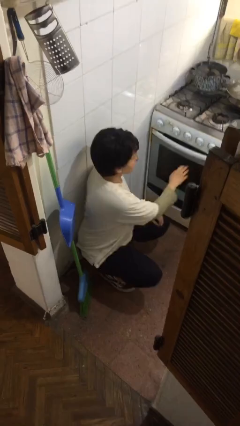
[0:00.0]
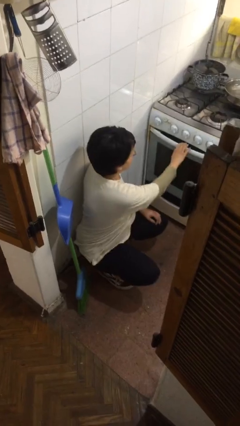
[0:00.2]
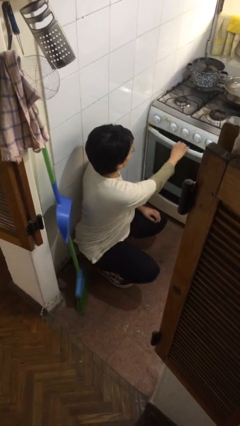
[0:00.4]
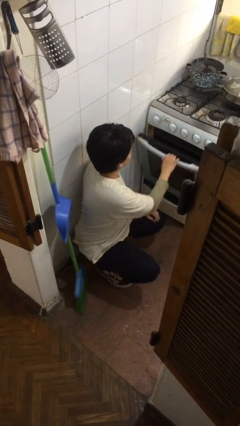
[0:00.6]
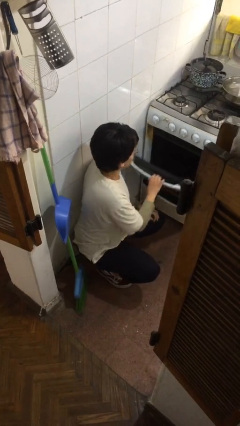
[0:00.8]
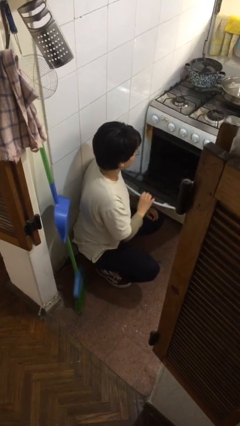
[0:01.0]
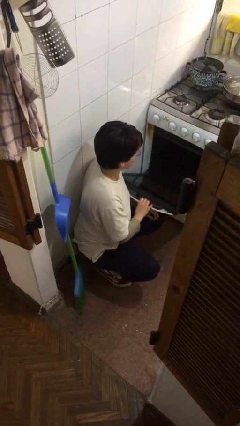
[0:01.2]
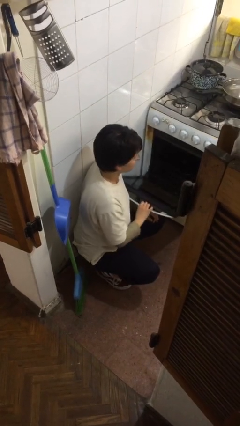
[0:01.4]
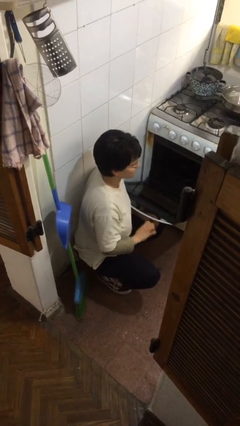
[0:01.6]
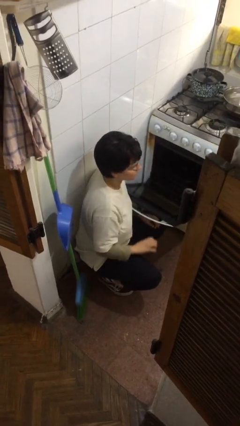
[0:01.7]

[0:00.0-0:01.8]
person opens oven door

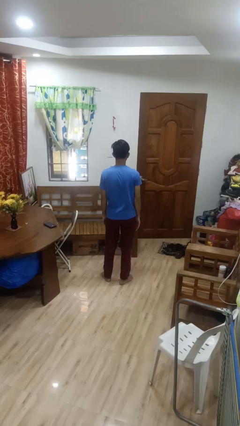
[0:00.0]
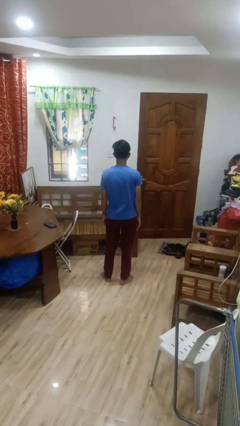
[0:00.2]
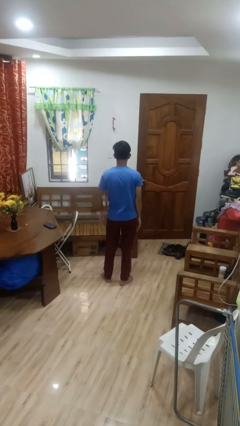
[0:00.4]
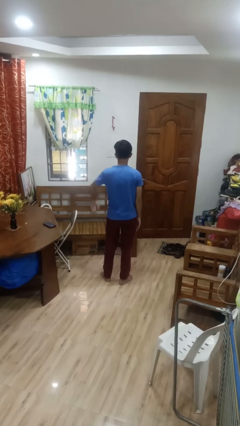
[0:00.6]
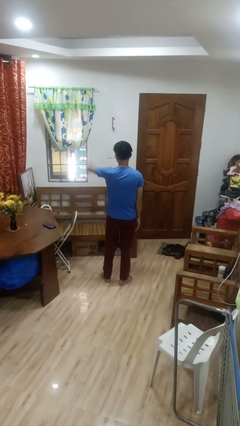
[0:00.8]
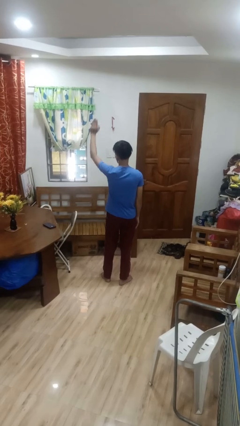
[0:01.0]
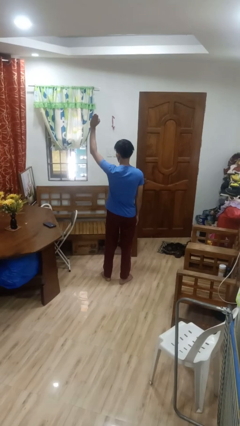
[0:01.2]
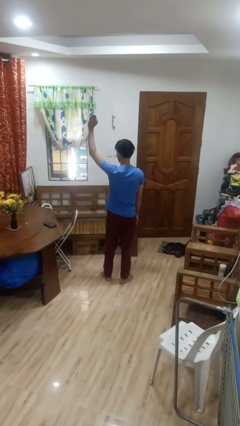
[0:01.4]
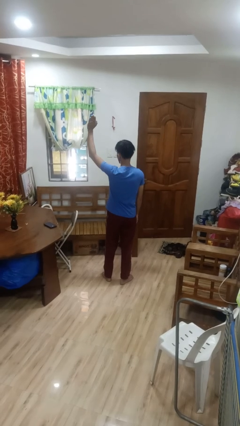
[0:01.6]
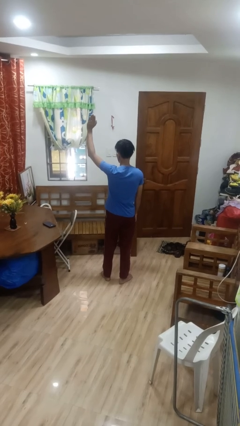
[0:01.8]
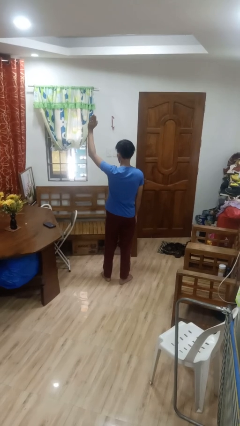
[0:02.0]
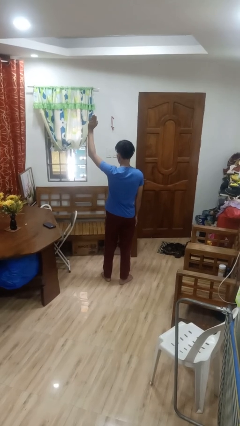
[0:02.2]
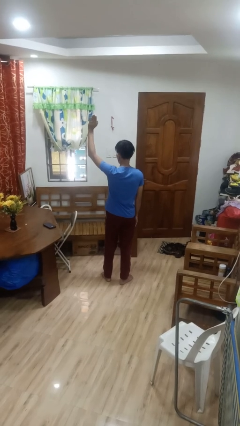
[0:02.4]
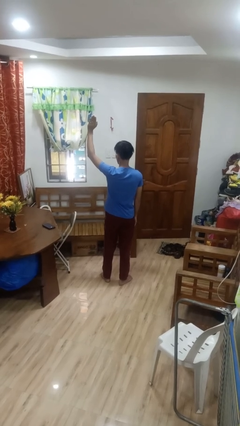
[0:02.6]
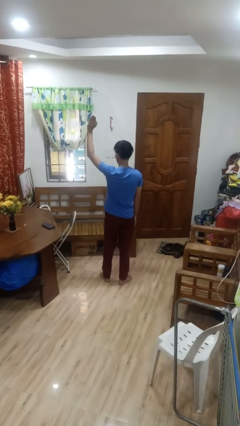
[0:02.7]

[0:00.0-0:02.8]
person gestures swipe up

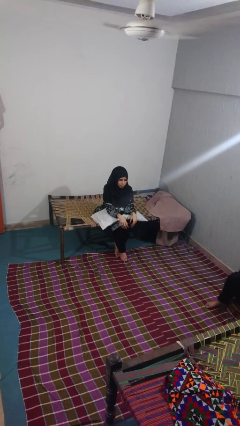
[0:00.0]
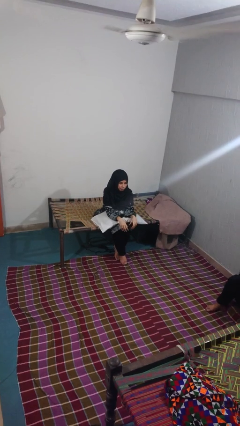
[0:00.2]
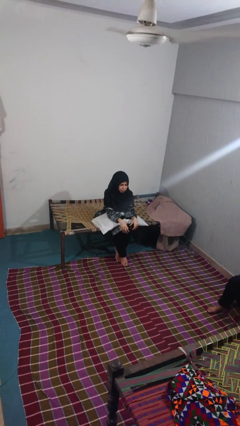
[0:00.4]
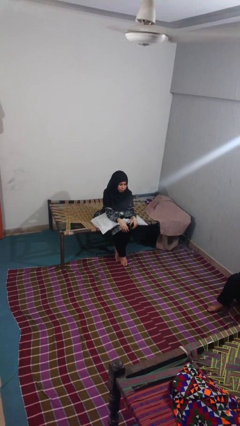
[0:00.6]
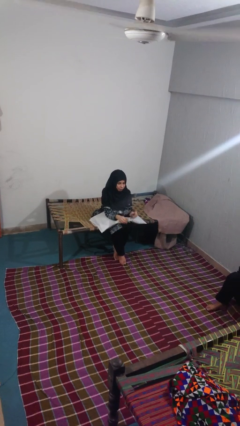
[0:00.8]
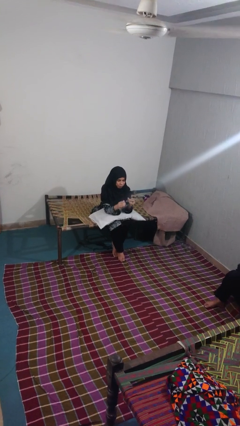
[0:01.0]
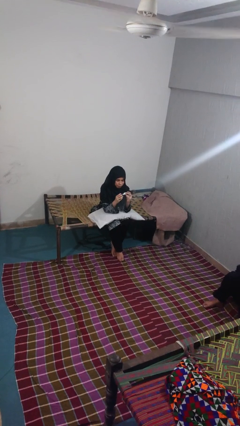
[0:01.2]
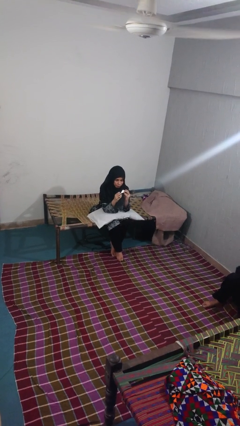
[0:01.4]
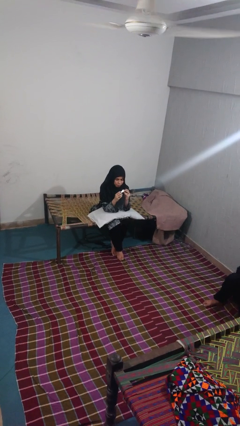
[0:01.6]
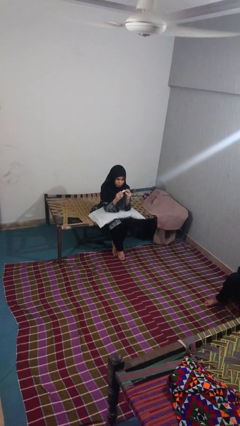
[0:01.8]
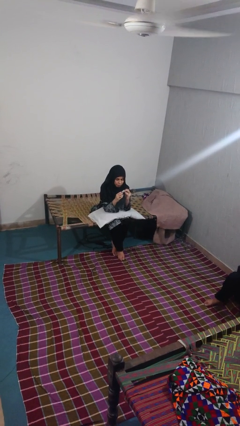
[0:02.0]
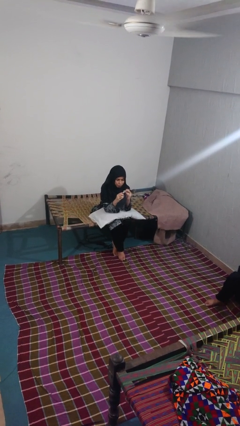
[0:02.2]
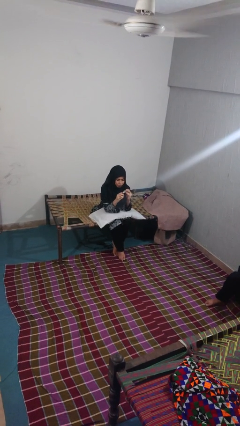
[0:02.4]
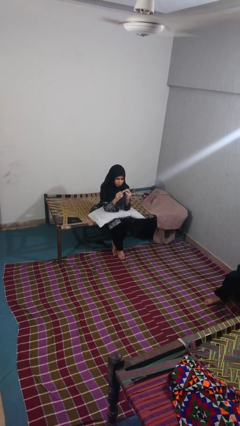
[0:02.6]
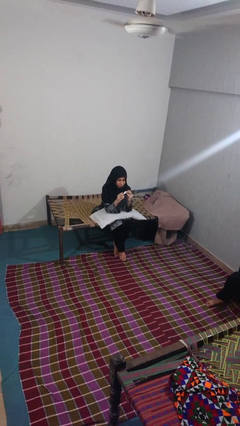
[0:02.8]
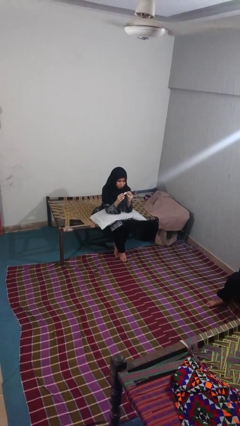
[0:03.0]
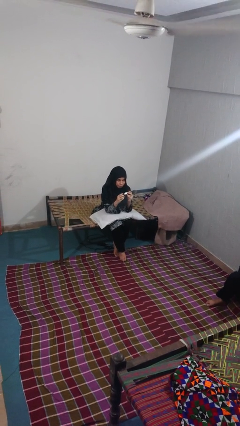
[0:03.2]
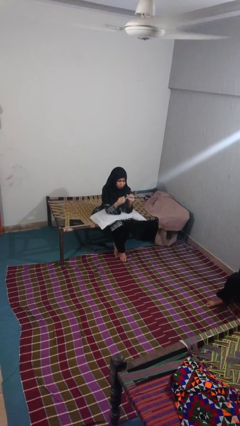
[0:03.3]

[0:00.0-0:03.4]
person clips fingernails

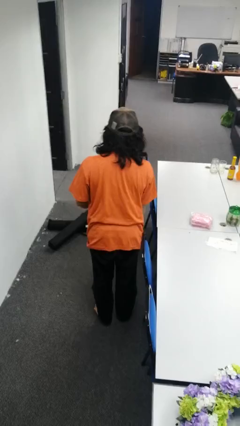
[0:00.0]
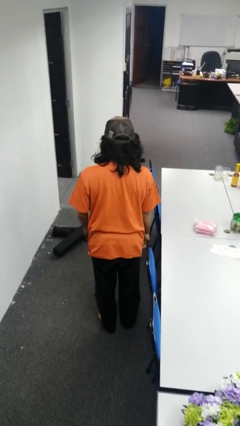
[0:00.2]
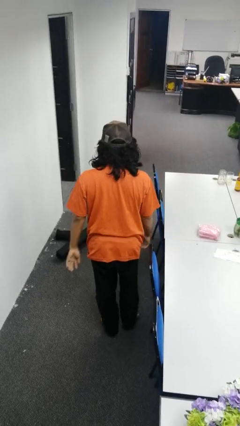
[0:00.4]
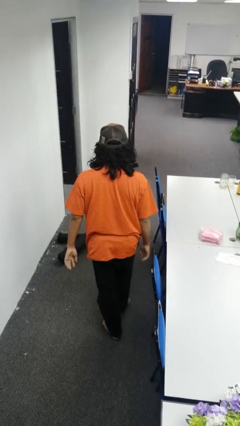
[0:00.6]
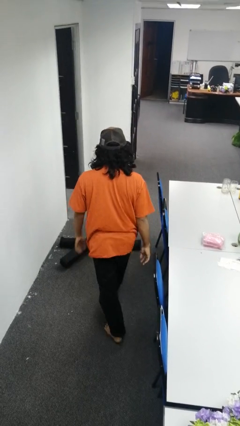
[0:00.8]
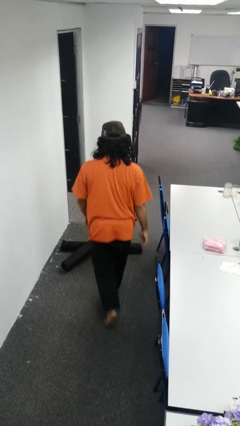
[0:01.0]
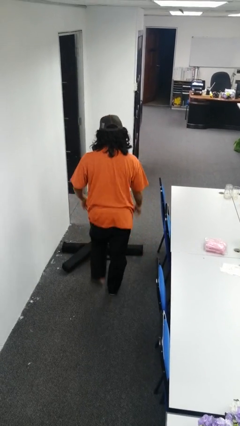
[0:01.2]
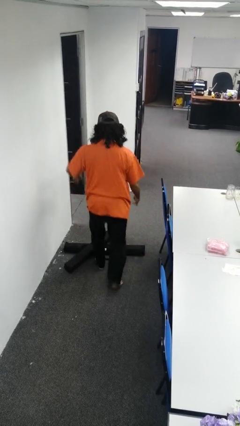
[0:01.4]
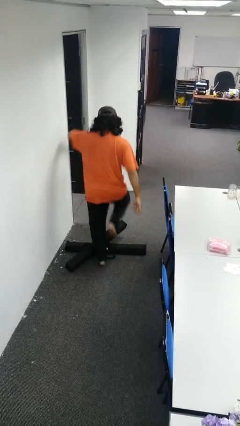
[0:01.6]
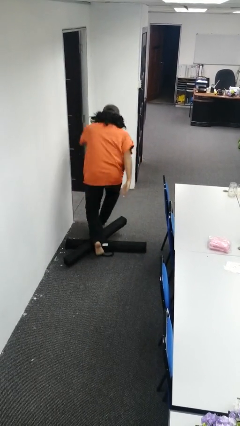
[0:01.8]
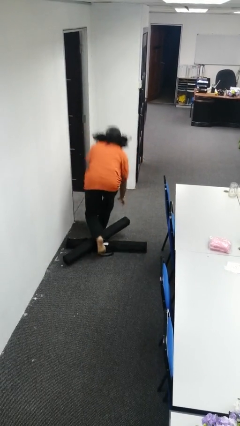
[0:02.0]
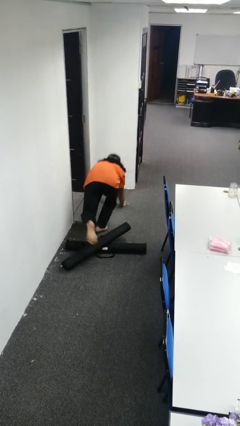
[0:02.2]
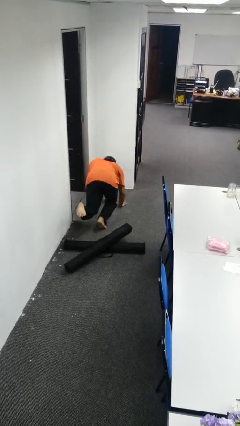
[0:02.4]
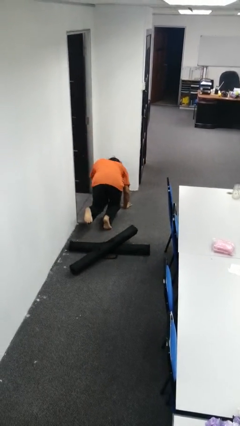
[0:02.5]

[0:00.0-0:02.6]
person trips on object on floor

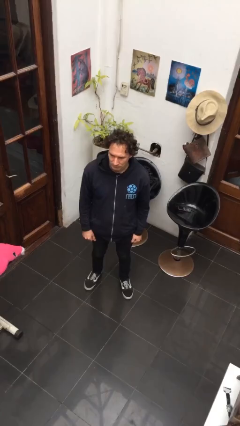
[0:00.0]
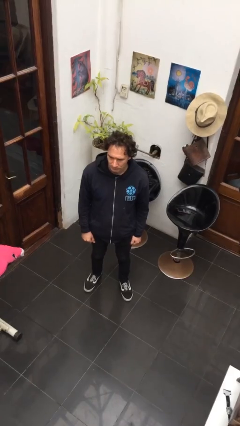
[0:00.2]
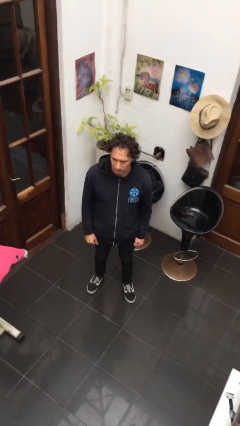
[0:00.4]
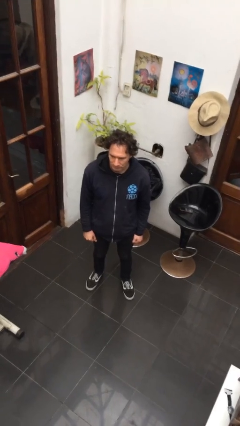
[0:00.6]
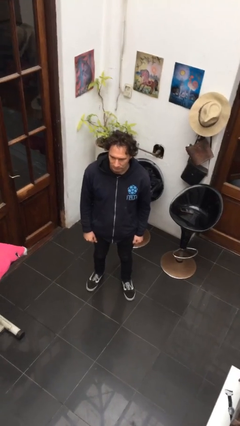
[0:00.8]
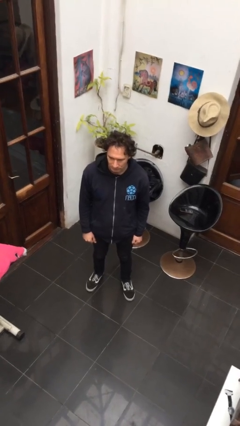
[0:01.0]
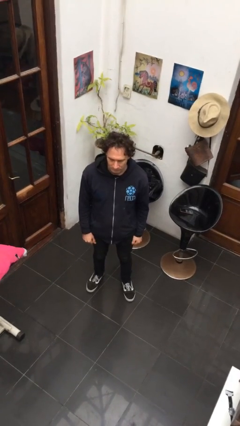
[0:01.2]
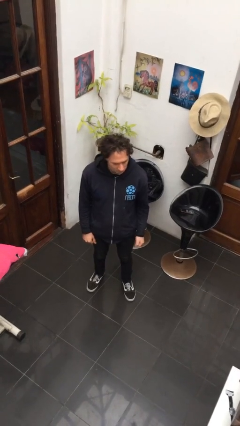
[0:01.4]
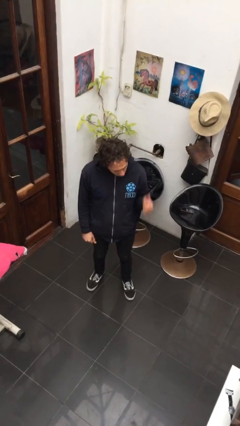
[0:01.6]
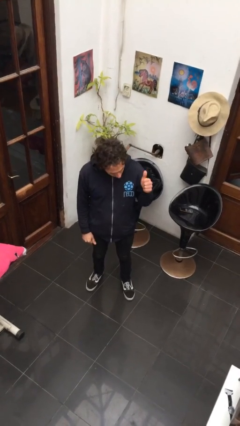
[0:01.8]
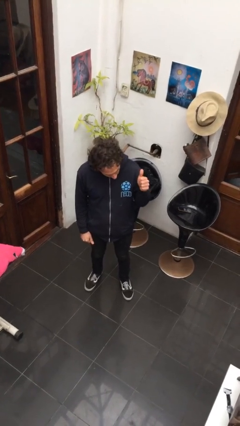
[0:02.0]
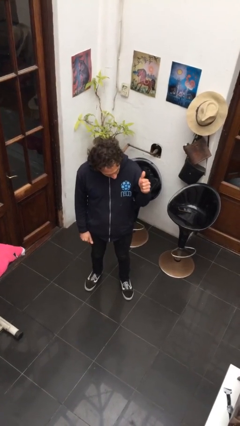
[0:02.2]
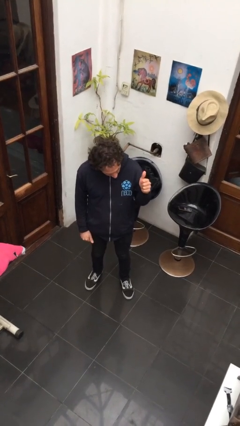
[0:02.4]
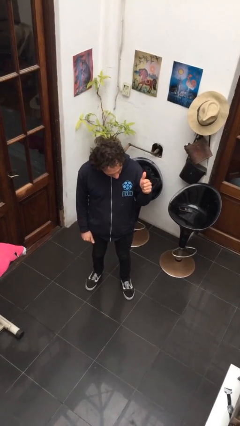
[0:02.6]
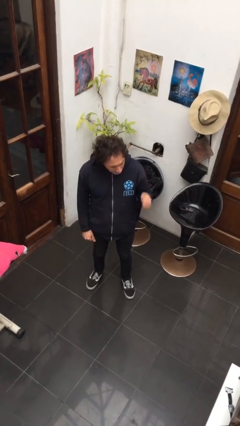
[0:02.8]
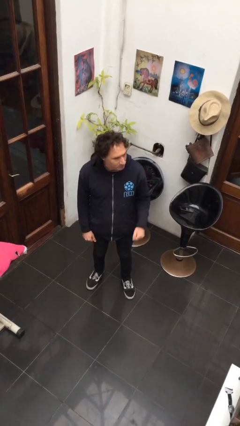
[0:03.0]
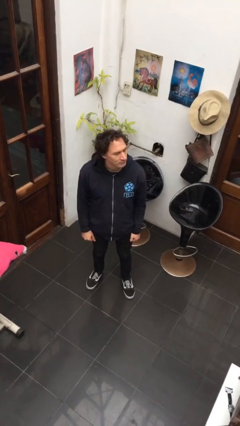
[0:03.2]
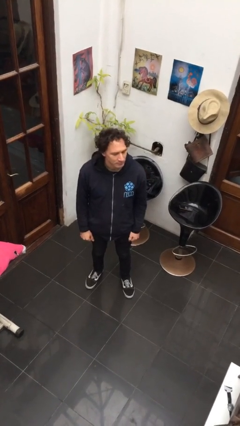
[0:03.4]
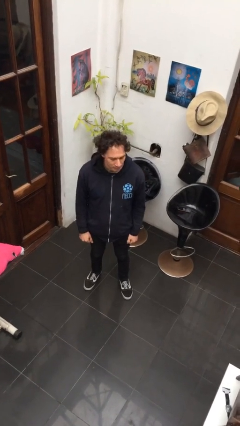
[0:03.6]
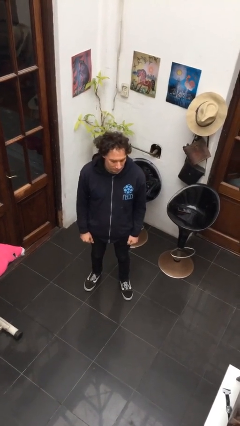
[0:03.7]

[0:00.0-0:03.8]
person gestures thumbs up

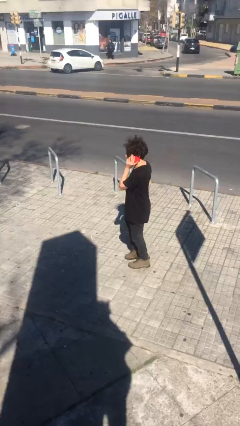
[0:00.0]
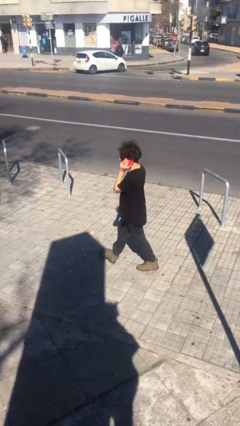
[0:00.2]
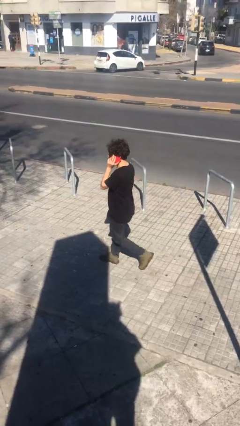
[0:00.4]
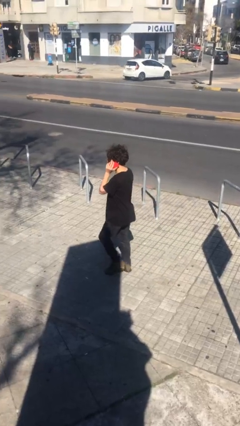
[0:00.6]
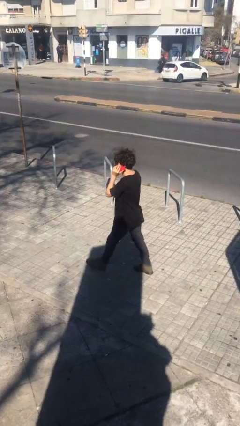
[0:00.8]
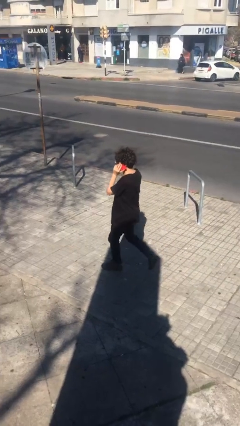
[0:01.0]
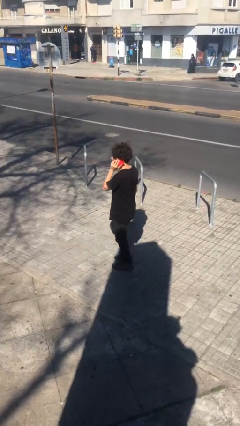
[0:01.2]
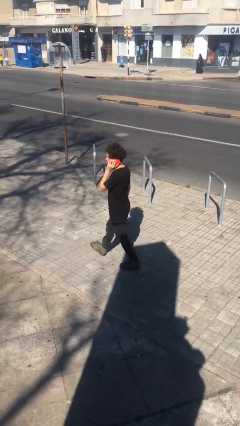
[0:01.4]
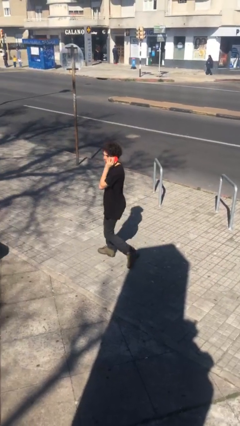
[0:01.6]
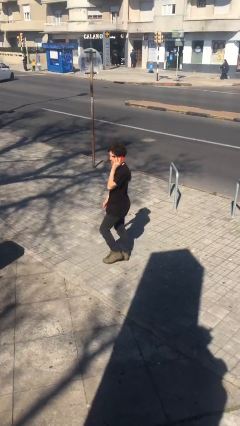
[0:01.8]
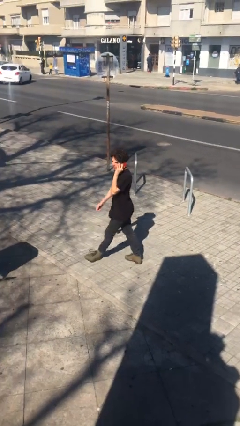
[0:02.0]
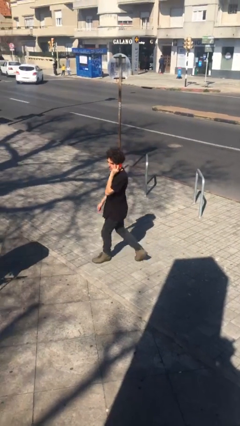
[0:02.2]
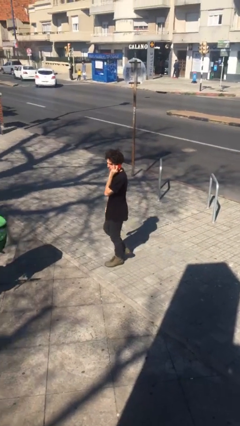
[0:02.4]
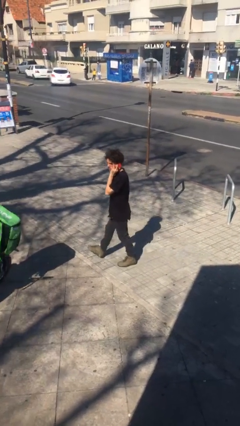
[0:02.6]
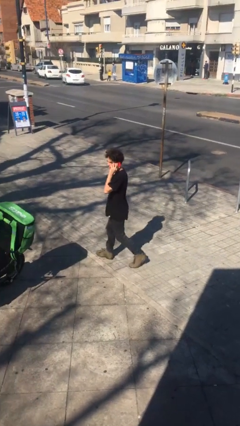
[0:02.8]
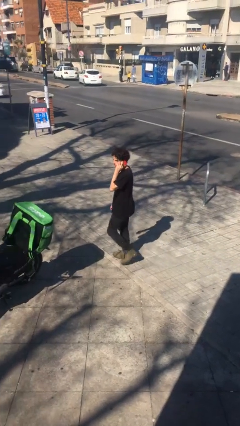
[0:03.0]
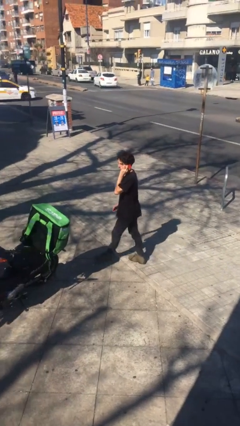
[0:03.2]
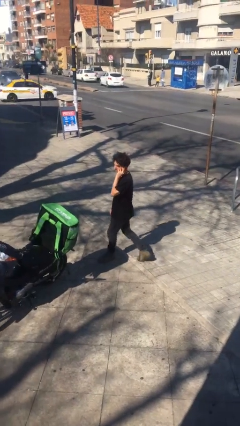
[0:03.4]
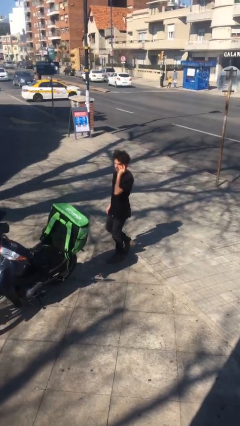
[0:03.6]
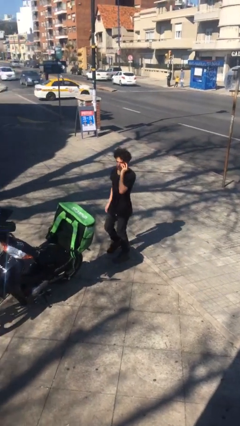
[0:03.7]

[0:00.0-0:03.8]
person talks on phone
